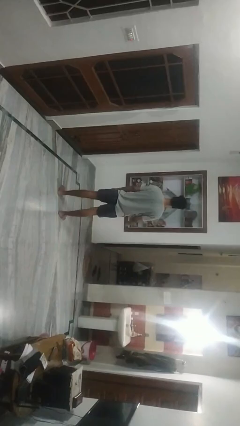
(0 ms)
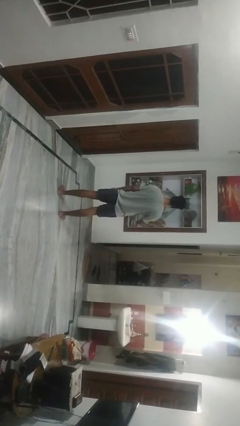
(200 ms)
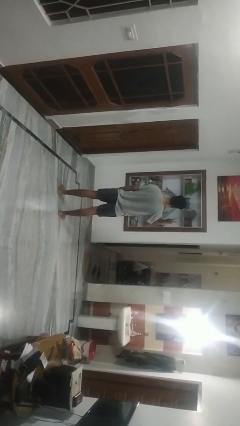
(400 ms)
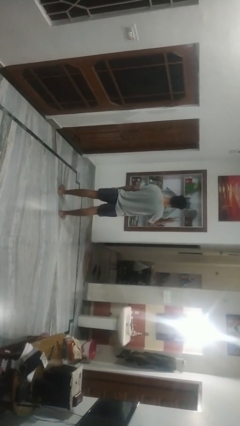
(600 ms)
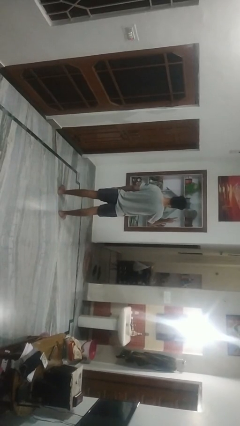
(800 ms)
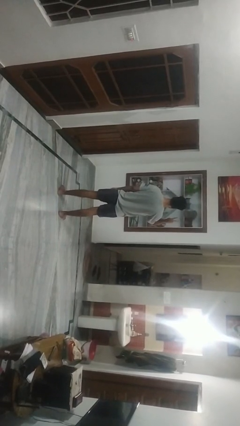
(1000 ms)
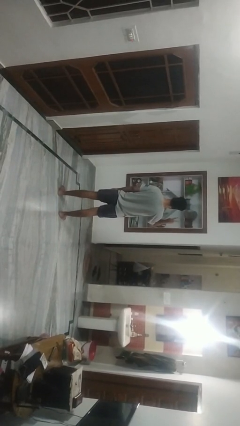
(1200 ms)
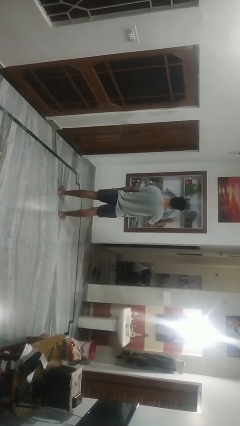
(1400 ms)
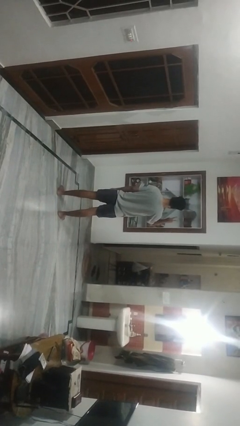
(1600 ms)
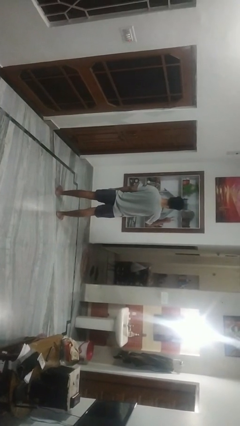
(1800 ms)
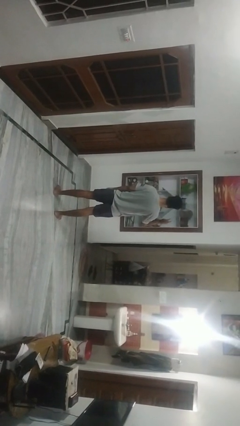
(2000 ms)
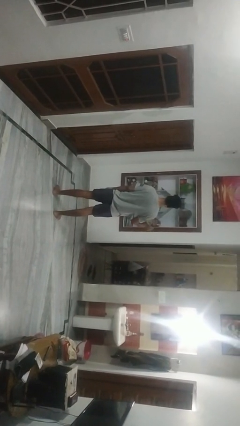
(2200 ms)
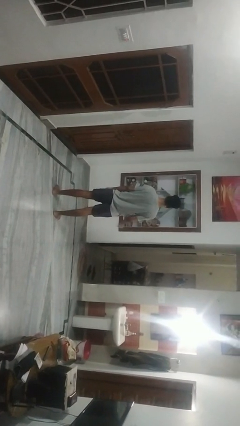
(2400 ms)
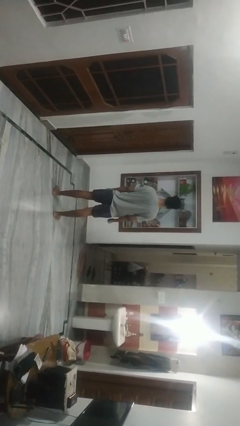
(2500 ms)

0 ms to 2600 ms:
person gestures peace

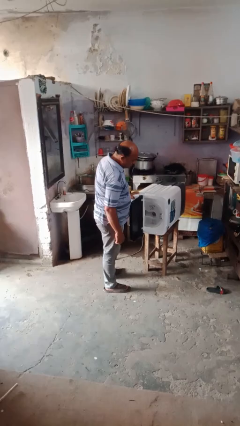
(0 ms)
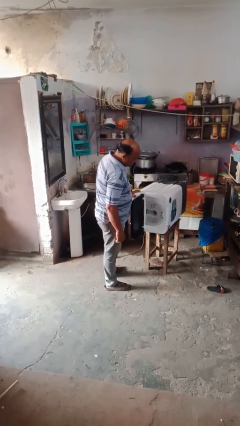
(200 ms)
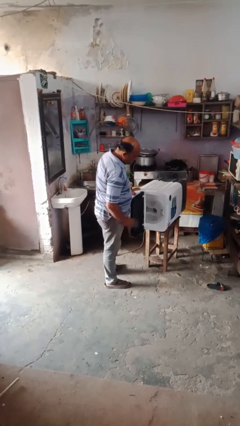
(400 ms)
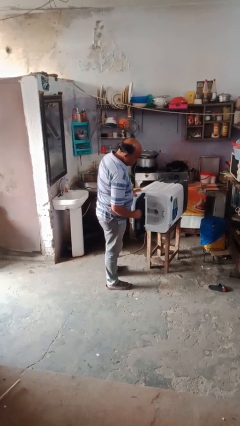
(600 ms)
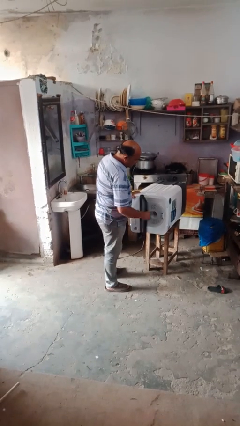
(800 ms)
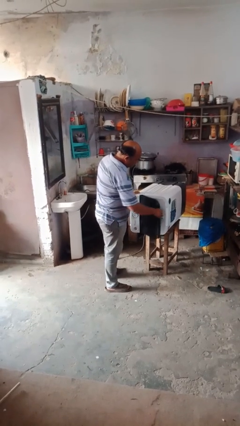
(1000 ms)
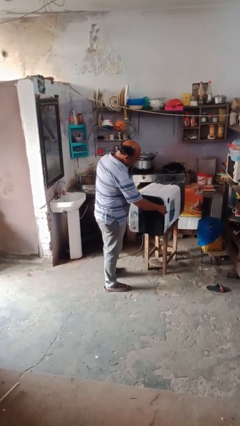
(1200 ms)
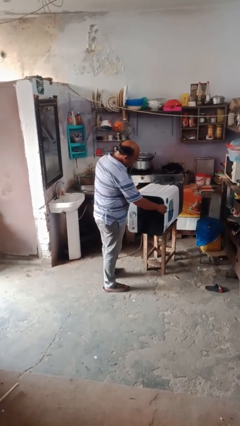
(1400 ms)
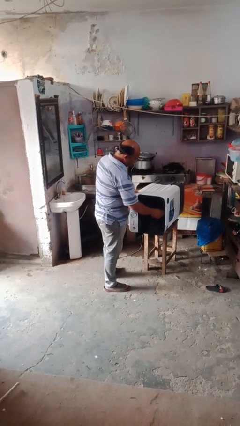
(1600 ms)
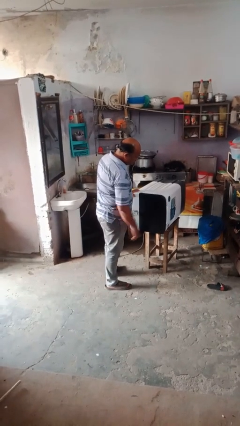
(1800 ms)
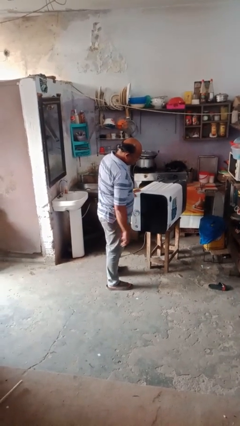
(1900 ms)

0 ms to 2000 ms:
person closes dishwasher

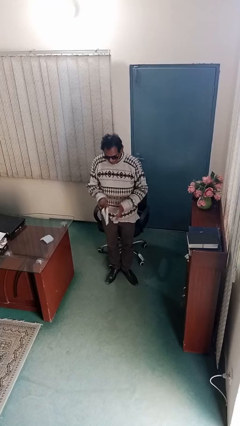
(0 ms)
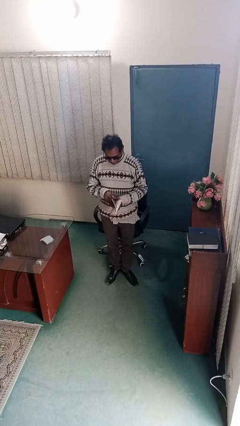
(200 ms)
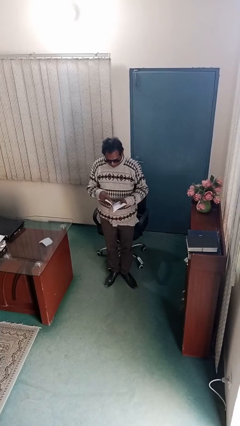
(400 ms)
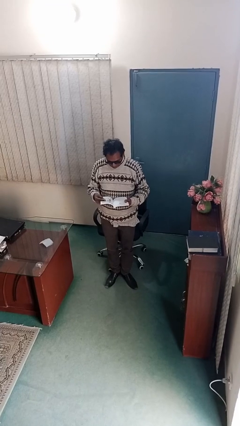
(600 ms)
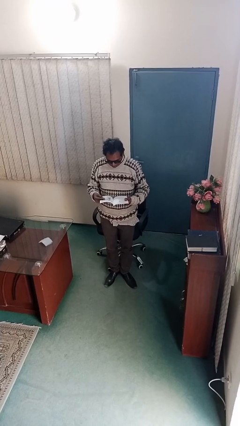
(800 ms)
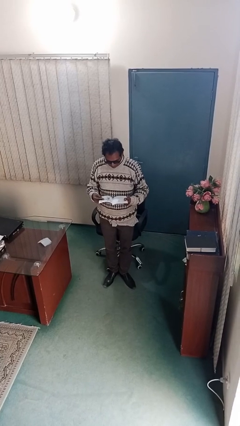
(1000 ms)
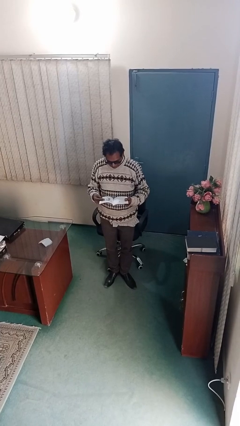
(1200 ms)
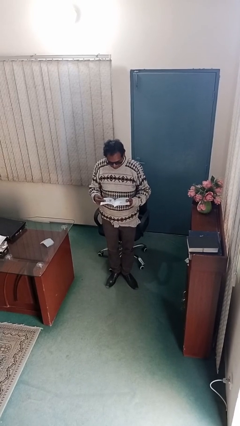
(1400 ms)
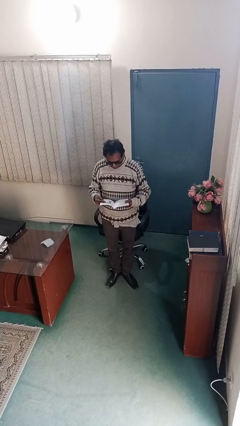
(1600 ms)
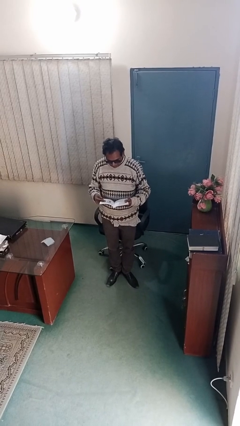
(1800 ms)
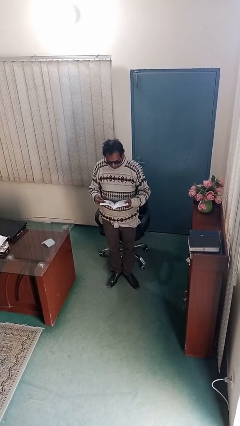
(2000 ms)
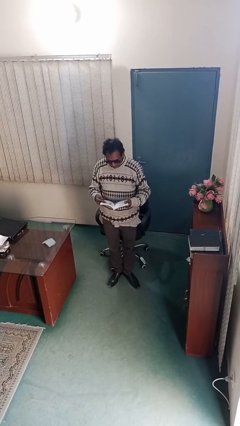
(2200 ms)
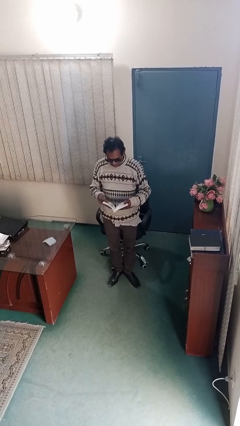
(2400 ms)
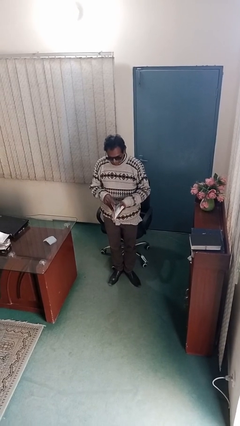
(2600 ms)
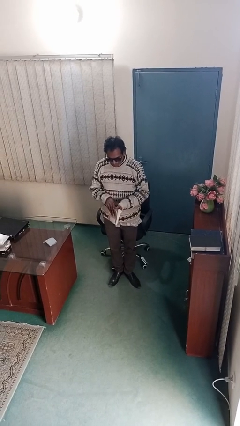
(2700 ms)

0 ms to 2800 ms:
person reads document

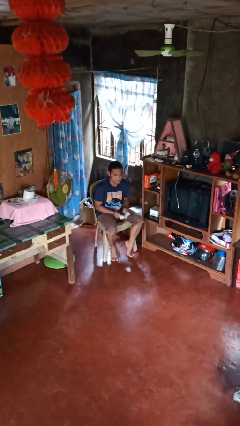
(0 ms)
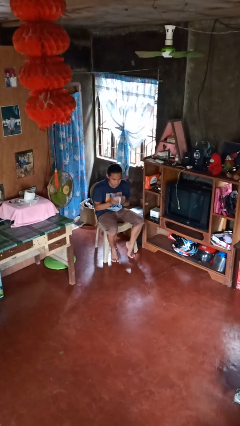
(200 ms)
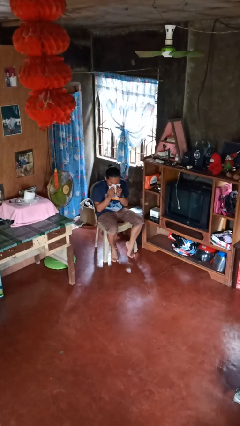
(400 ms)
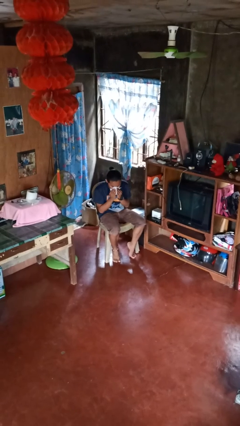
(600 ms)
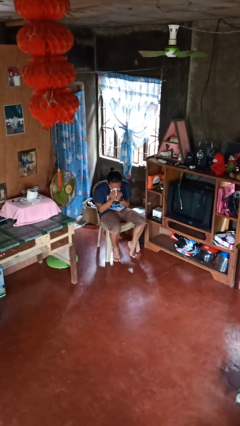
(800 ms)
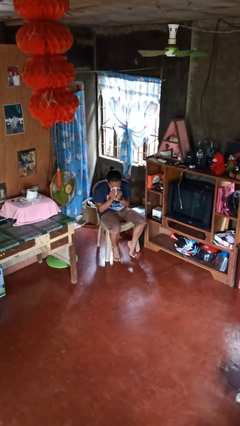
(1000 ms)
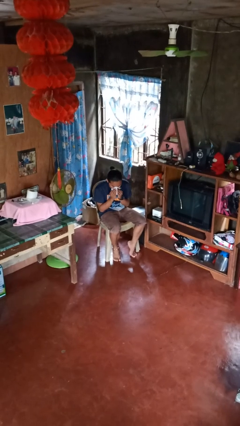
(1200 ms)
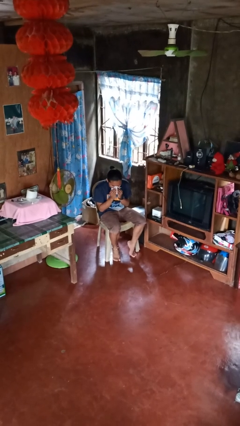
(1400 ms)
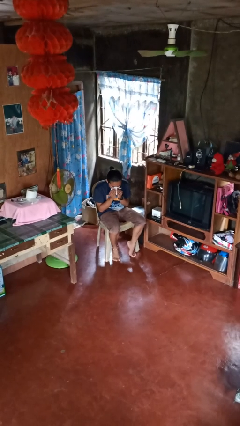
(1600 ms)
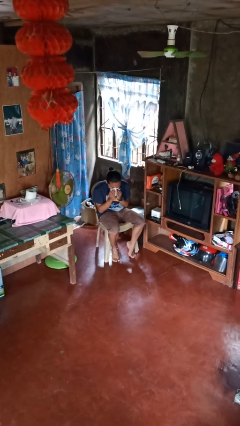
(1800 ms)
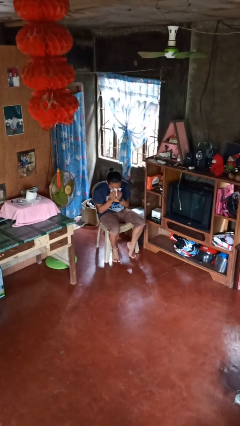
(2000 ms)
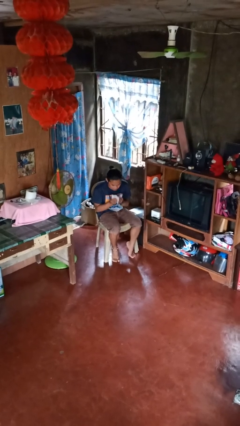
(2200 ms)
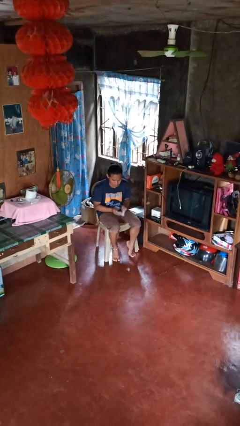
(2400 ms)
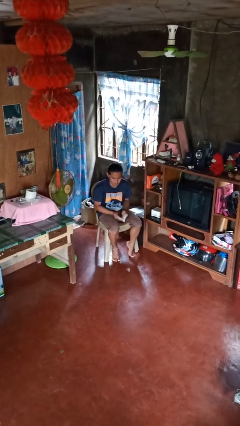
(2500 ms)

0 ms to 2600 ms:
person blows nose

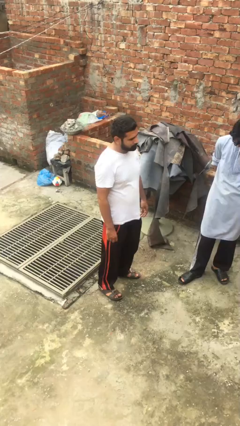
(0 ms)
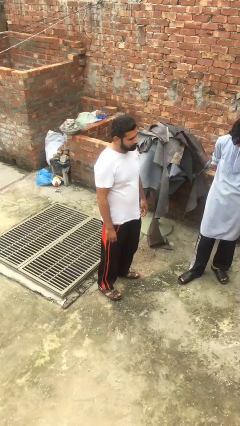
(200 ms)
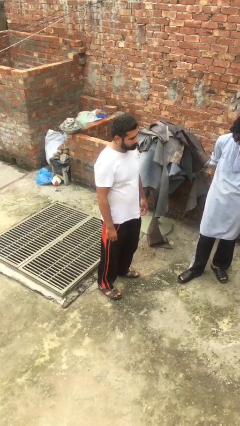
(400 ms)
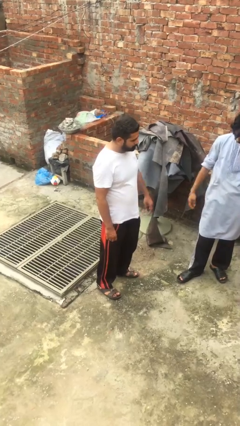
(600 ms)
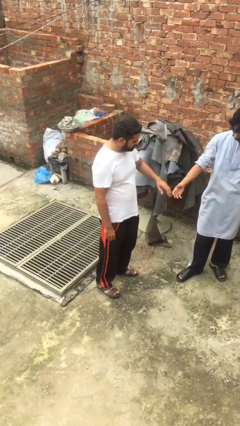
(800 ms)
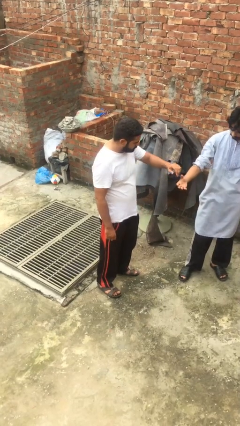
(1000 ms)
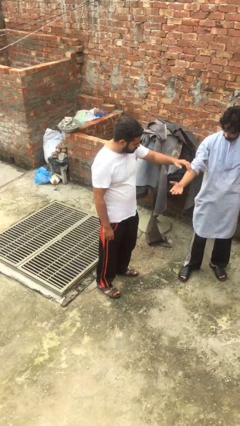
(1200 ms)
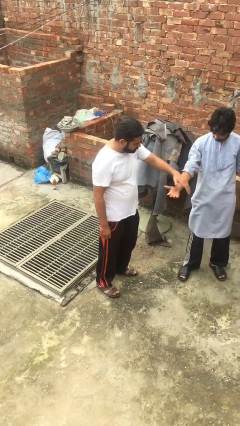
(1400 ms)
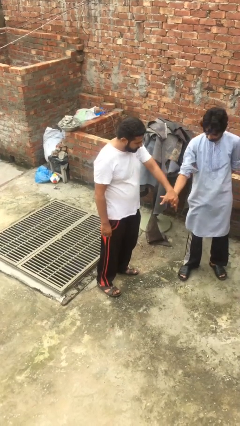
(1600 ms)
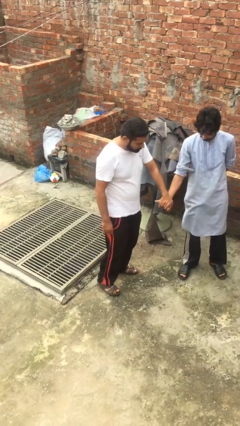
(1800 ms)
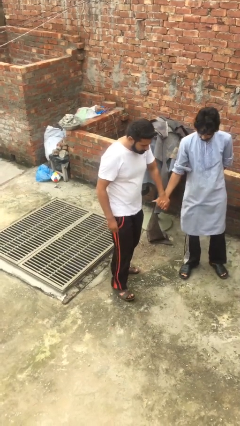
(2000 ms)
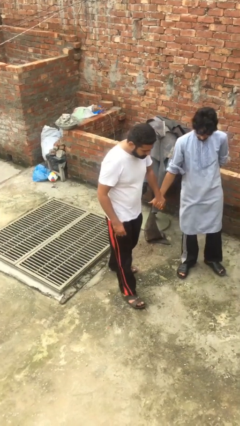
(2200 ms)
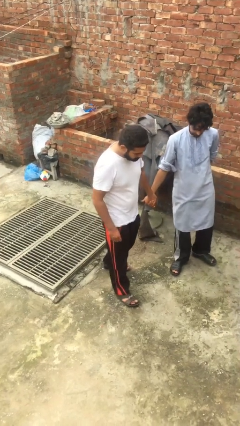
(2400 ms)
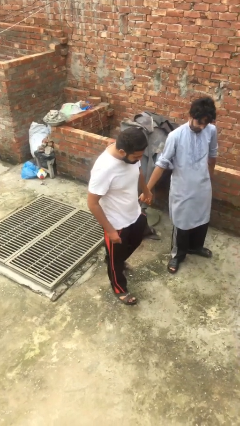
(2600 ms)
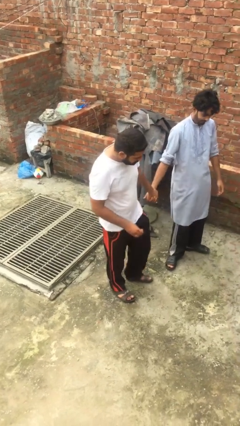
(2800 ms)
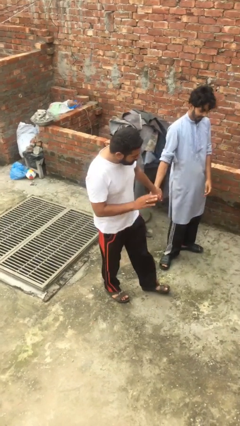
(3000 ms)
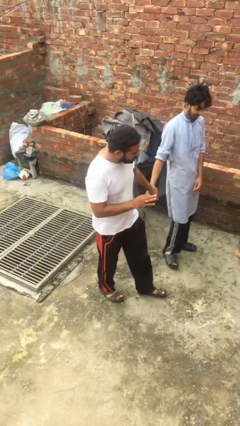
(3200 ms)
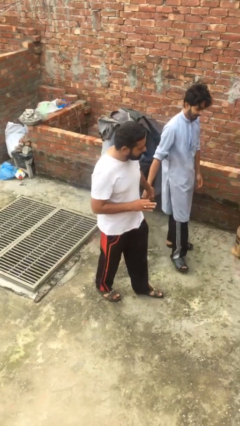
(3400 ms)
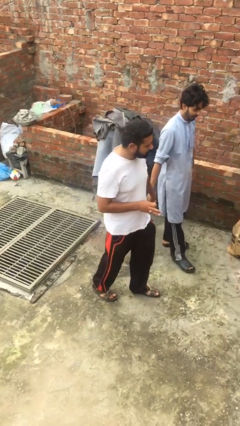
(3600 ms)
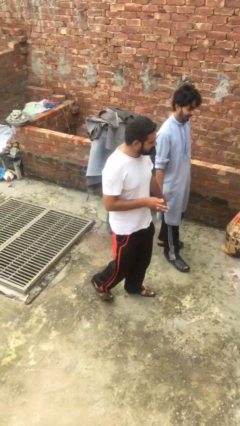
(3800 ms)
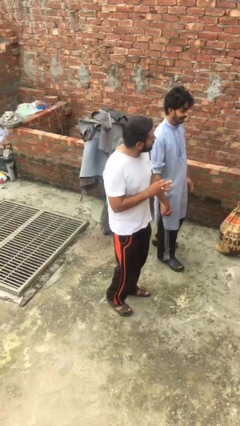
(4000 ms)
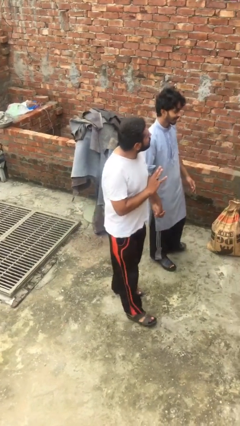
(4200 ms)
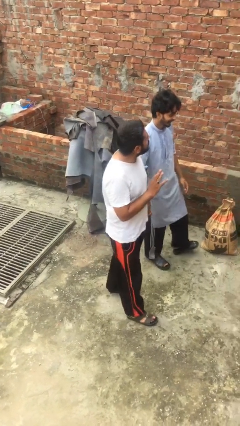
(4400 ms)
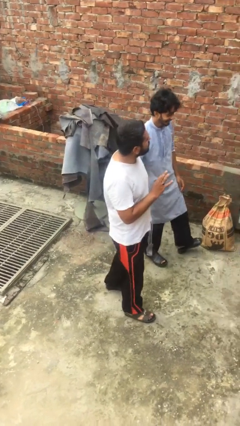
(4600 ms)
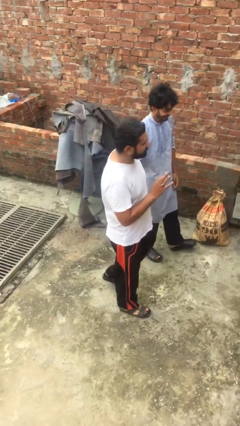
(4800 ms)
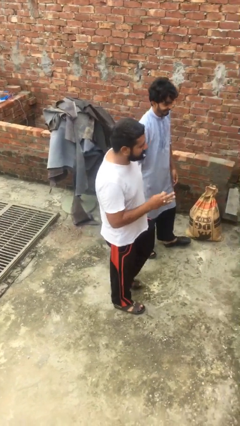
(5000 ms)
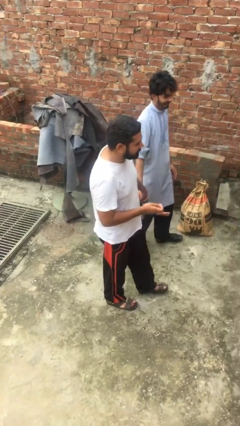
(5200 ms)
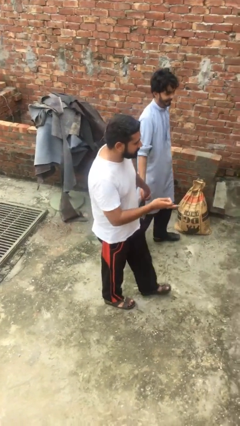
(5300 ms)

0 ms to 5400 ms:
person holds hand

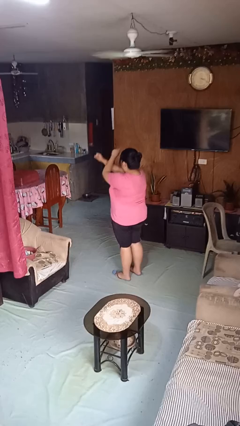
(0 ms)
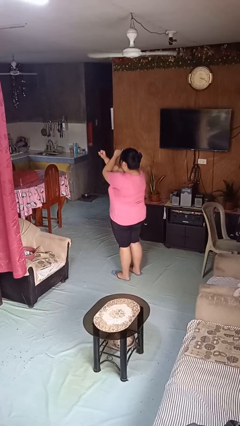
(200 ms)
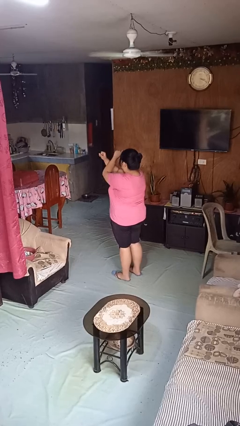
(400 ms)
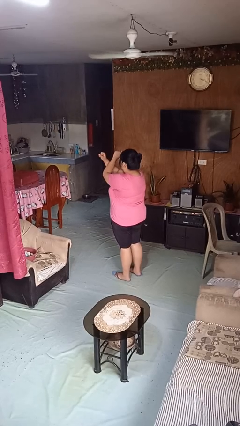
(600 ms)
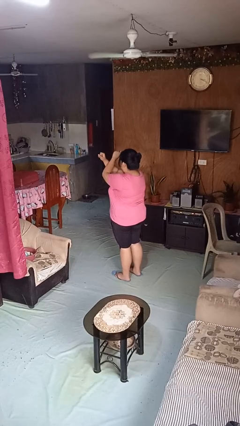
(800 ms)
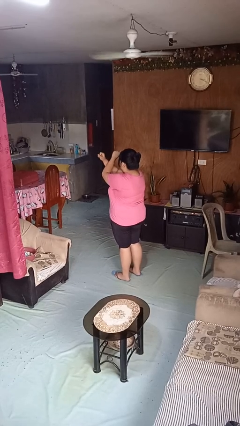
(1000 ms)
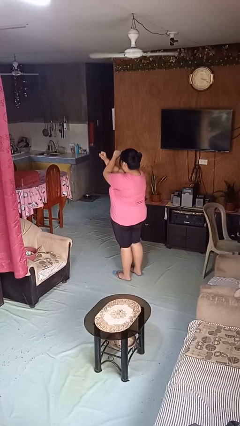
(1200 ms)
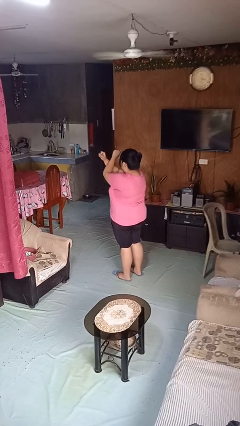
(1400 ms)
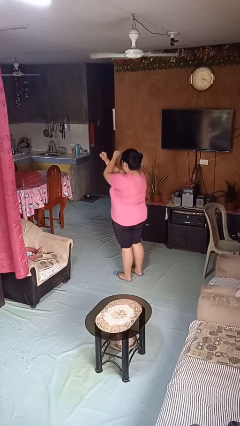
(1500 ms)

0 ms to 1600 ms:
person gestures arms x

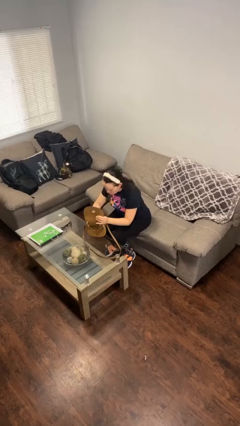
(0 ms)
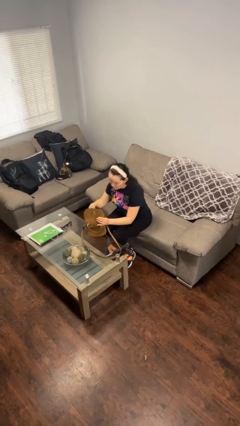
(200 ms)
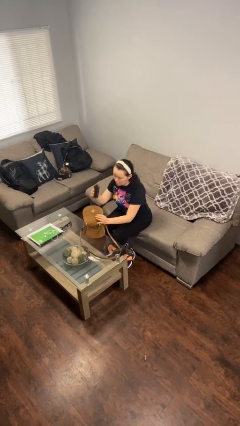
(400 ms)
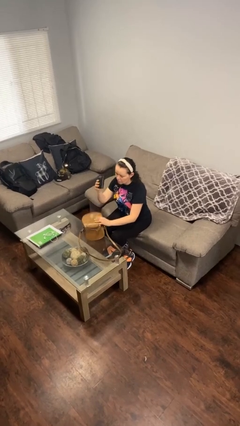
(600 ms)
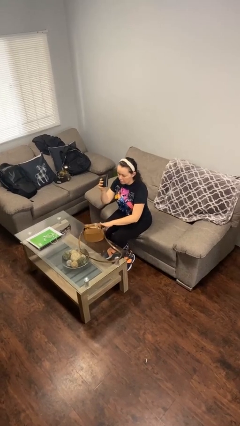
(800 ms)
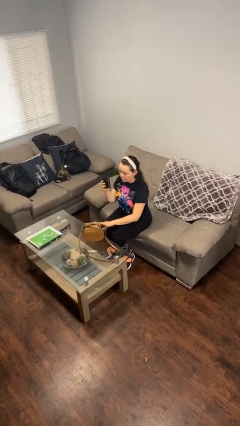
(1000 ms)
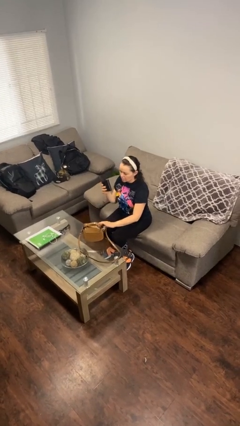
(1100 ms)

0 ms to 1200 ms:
person takes object from purse
